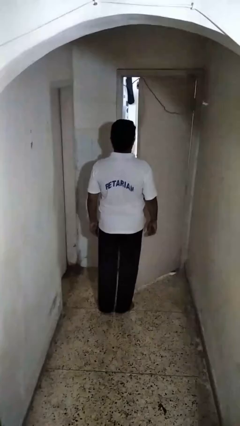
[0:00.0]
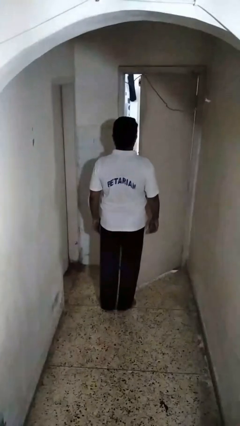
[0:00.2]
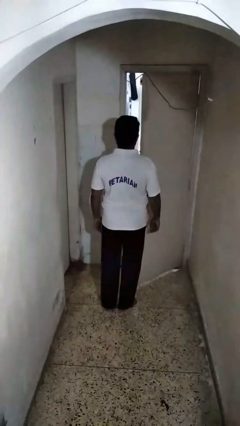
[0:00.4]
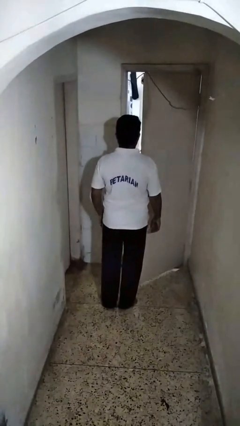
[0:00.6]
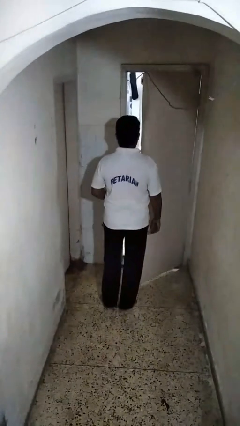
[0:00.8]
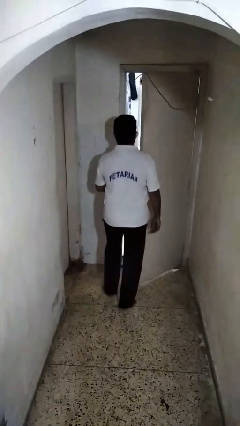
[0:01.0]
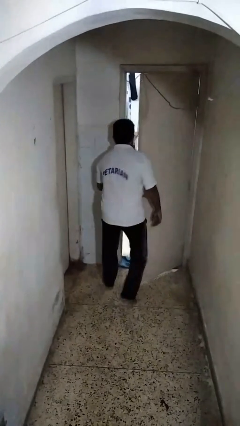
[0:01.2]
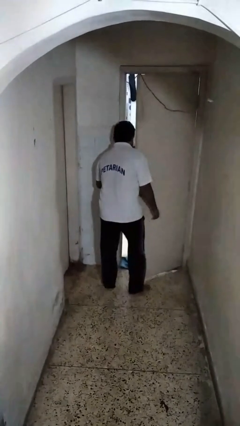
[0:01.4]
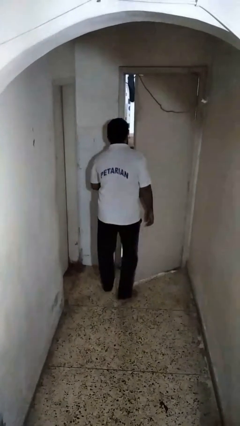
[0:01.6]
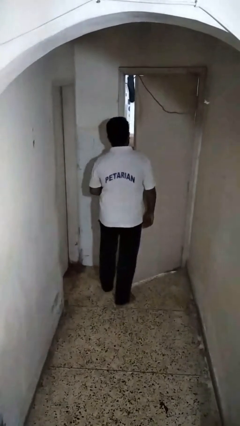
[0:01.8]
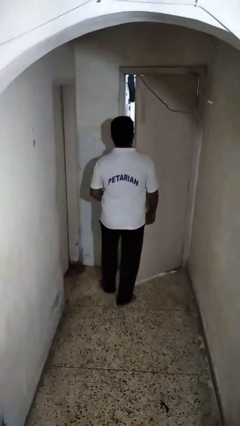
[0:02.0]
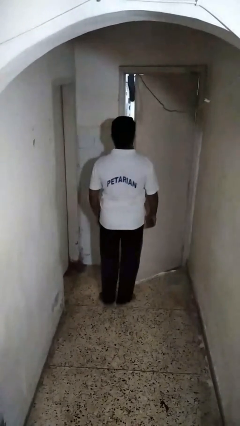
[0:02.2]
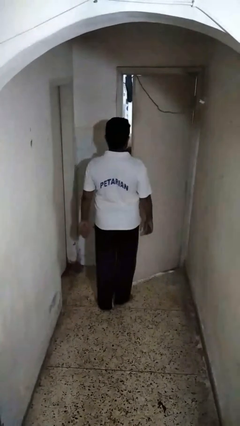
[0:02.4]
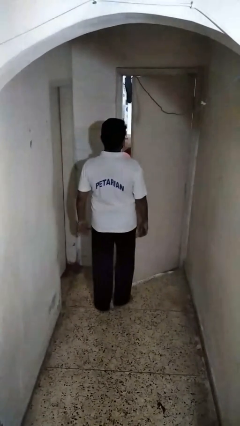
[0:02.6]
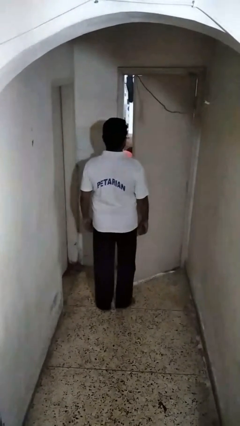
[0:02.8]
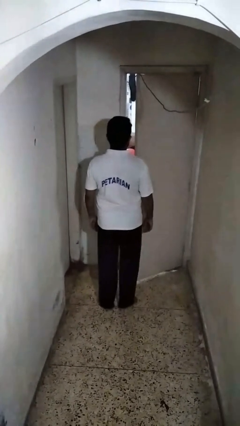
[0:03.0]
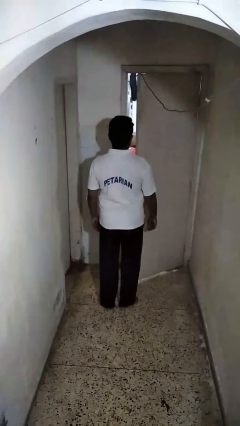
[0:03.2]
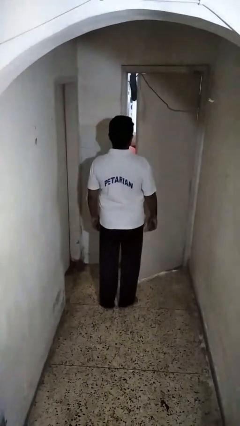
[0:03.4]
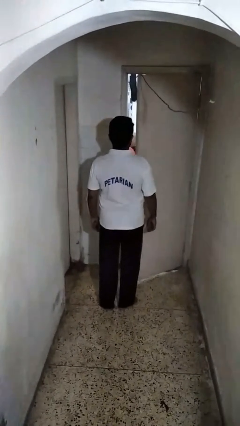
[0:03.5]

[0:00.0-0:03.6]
person bumps into wall

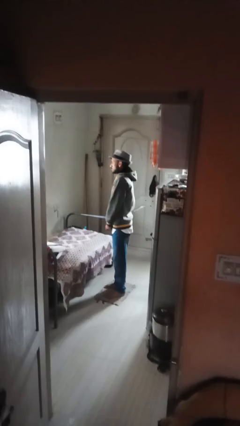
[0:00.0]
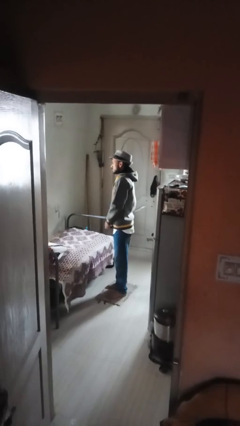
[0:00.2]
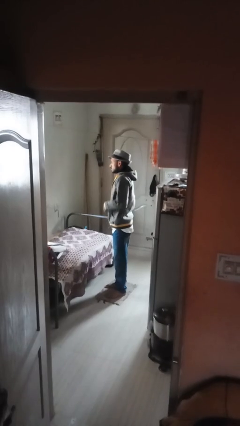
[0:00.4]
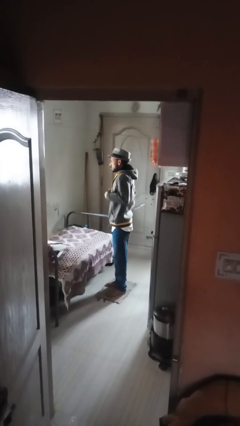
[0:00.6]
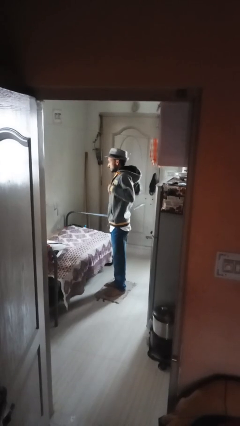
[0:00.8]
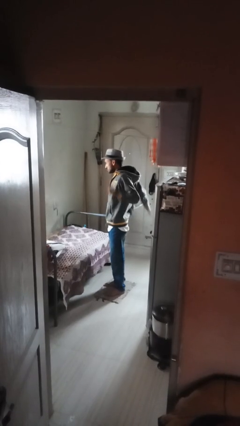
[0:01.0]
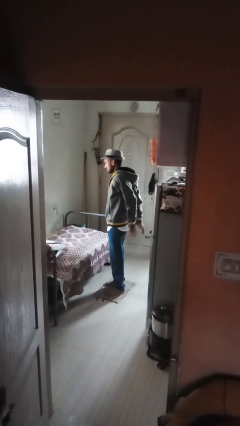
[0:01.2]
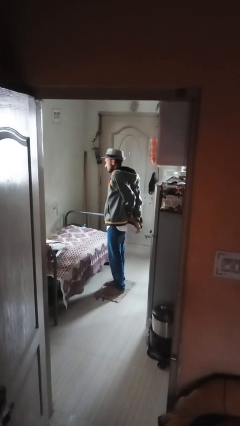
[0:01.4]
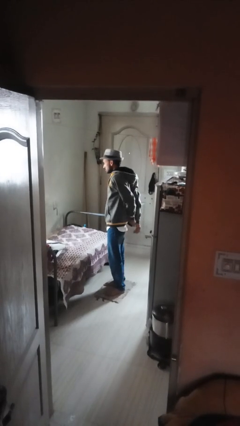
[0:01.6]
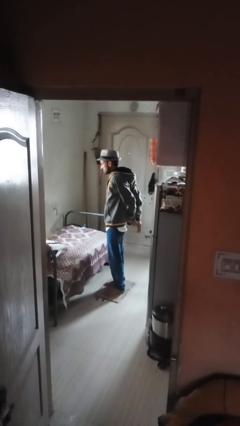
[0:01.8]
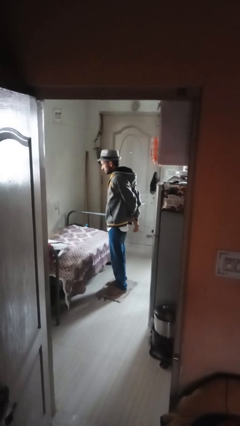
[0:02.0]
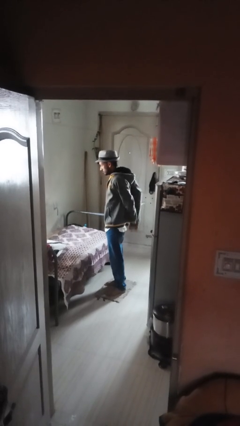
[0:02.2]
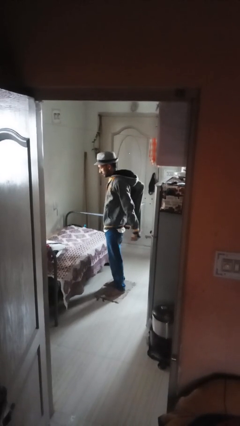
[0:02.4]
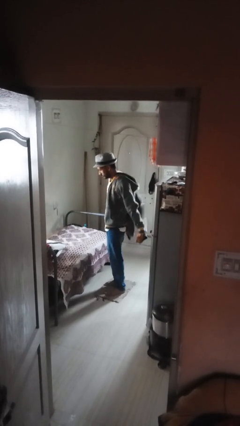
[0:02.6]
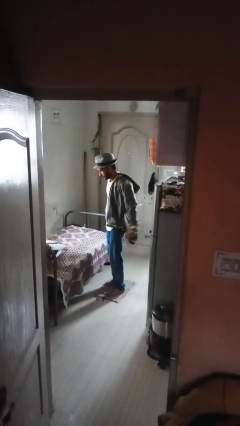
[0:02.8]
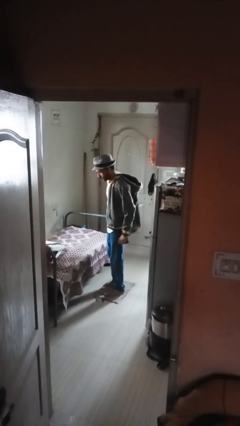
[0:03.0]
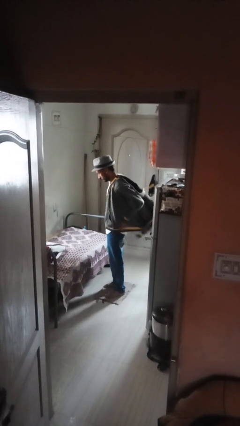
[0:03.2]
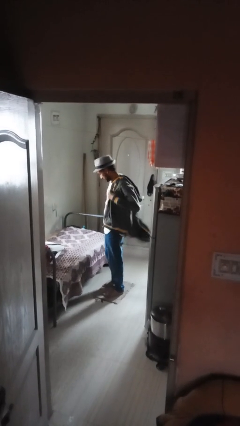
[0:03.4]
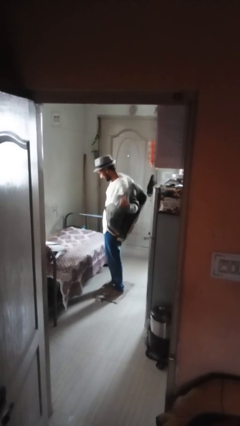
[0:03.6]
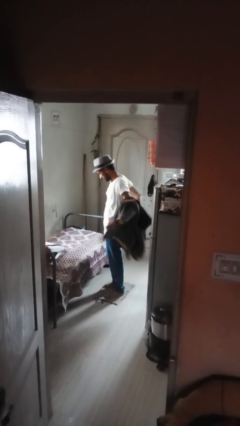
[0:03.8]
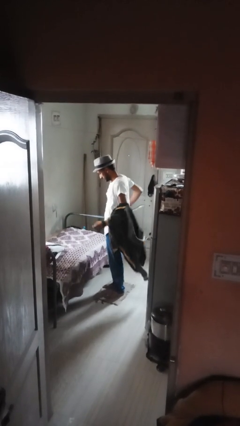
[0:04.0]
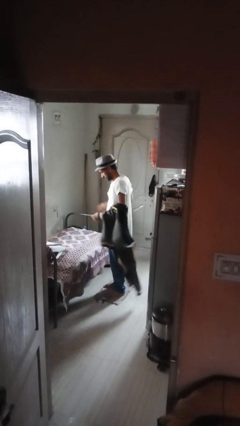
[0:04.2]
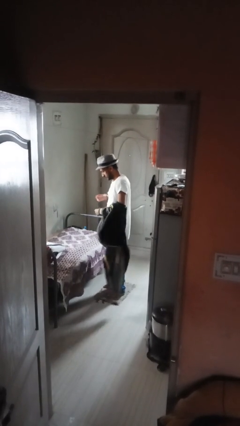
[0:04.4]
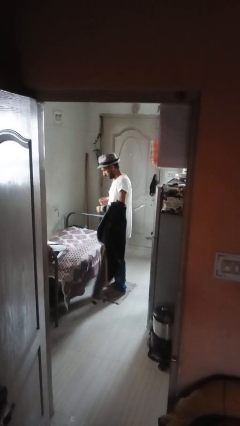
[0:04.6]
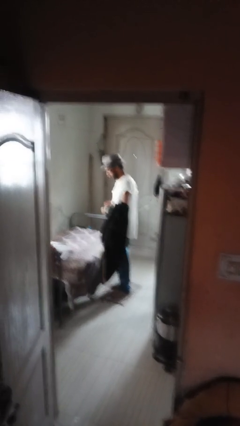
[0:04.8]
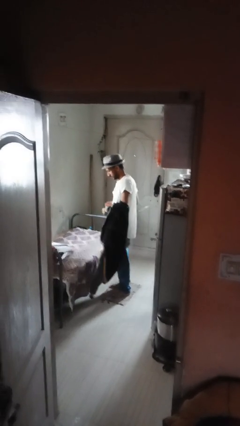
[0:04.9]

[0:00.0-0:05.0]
person takes off jacket

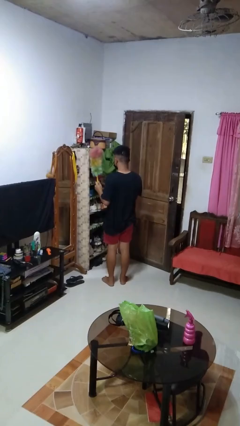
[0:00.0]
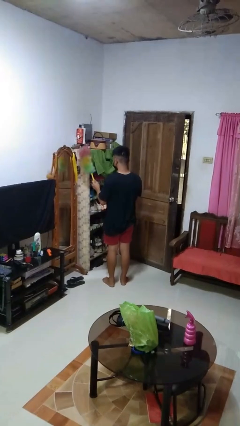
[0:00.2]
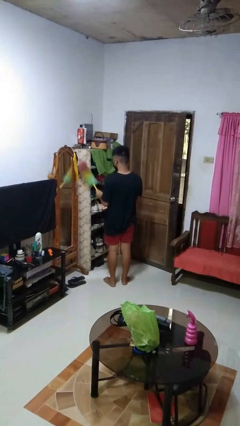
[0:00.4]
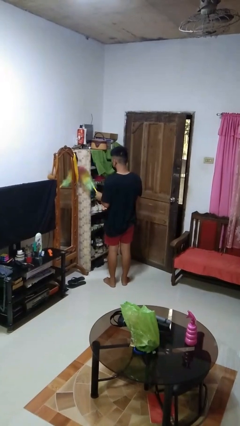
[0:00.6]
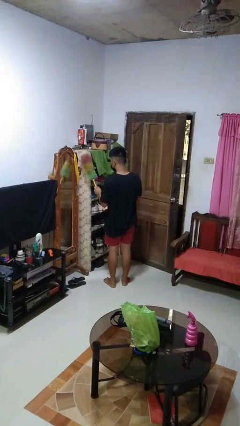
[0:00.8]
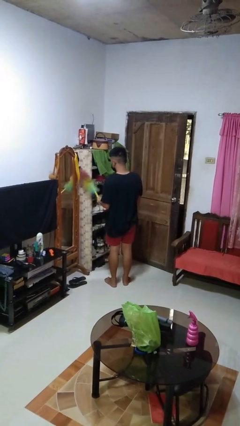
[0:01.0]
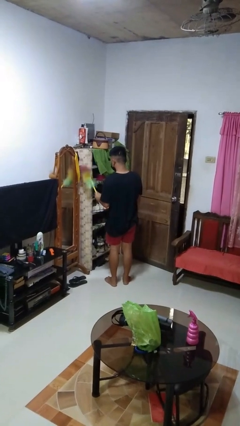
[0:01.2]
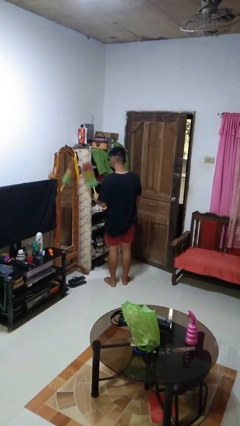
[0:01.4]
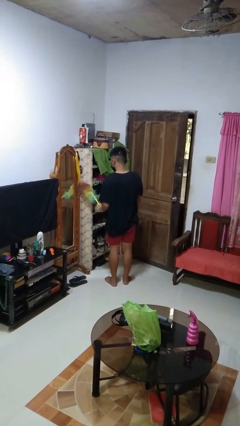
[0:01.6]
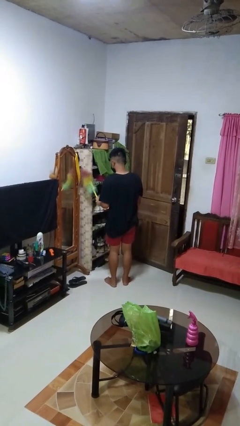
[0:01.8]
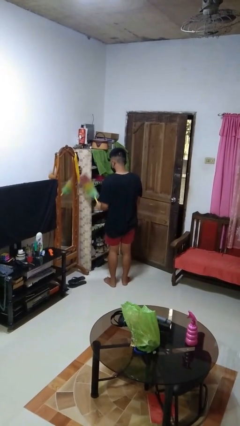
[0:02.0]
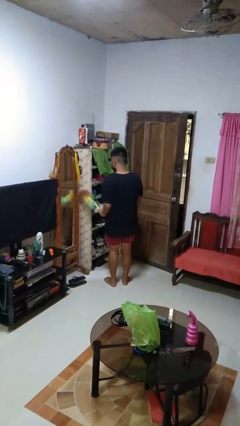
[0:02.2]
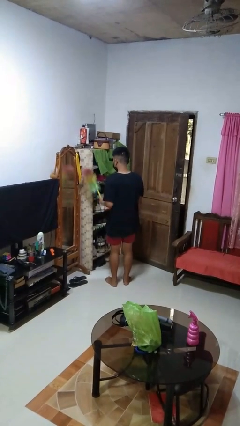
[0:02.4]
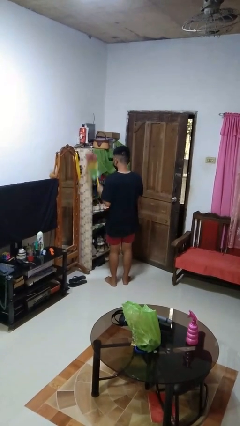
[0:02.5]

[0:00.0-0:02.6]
person dusts furniture

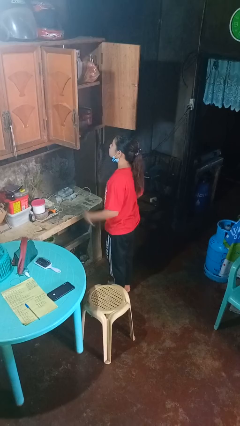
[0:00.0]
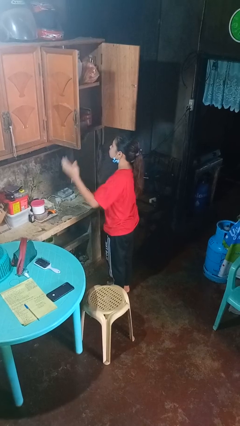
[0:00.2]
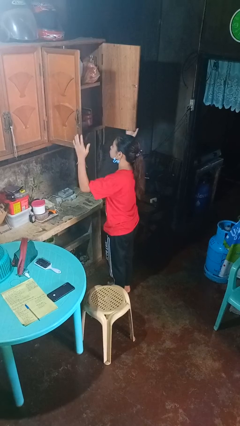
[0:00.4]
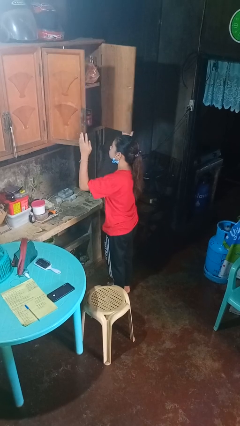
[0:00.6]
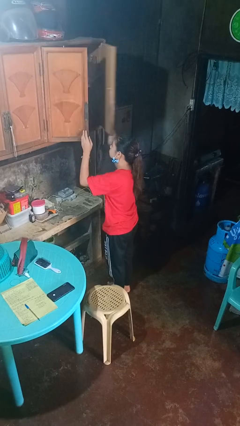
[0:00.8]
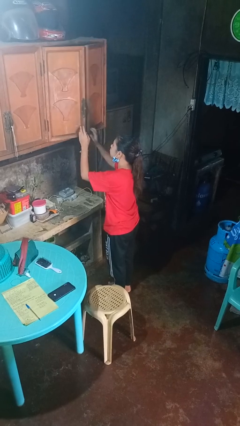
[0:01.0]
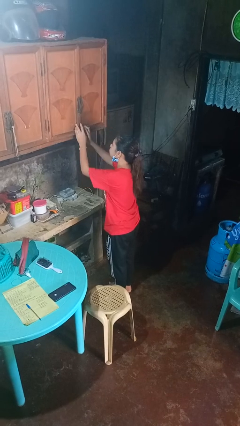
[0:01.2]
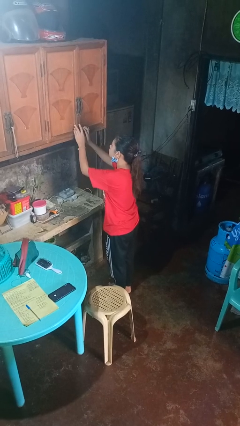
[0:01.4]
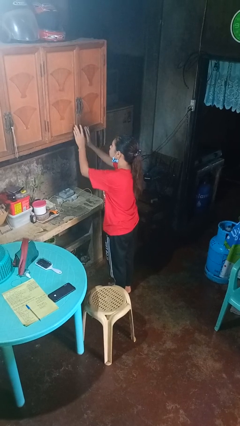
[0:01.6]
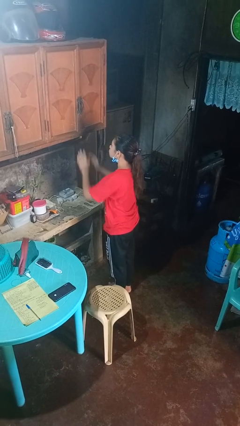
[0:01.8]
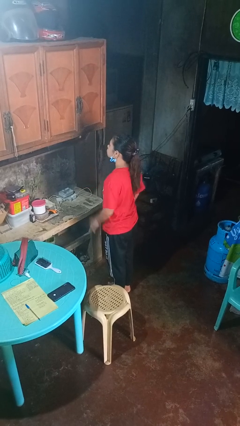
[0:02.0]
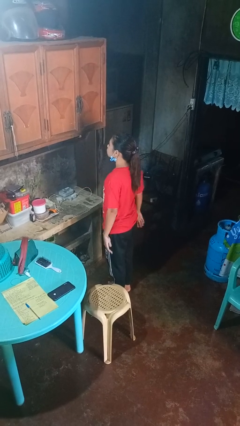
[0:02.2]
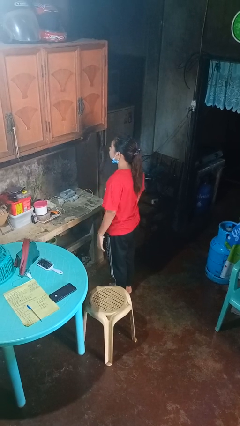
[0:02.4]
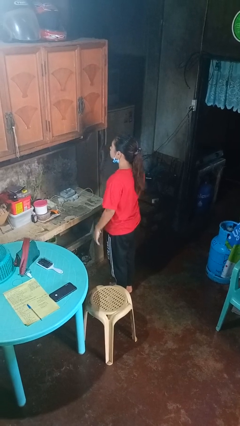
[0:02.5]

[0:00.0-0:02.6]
person closes cabinet

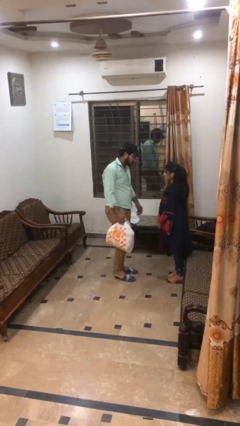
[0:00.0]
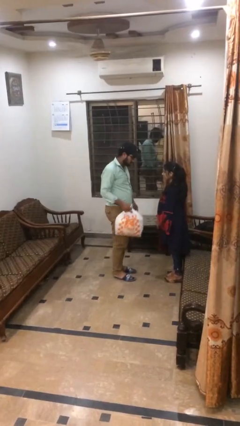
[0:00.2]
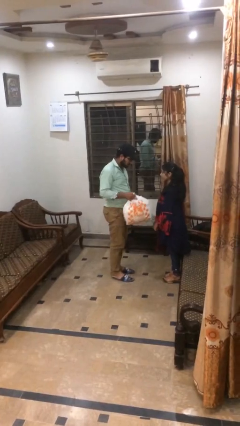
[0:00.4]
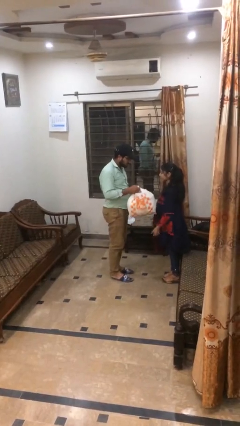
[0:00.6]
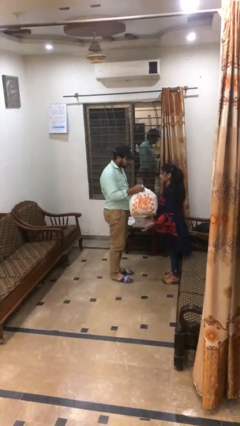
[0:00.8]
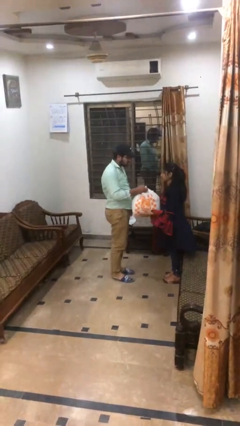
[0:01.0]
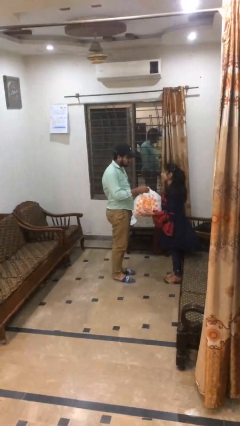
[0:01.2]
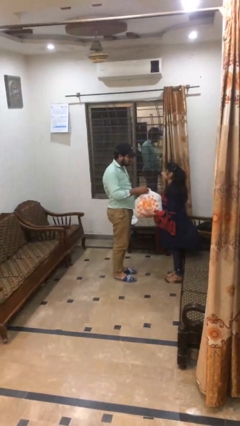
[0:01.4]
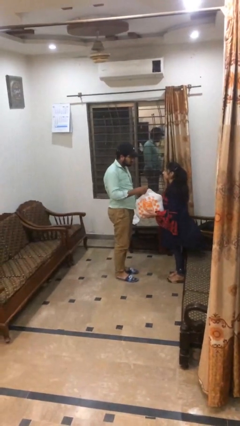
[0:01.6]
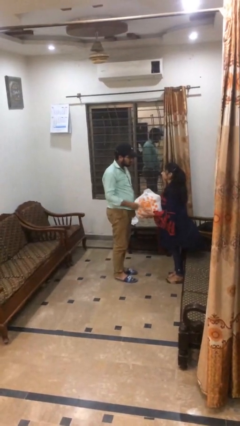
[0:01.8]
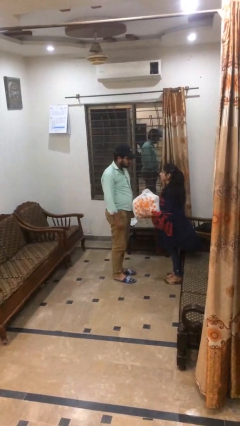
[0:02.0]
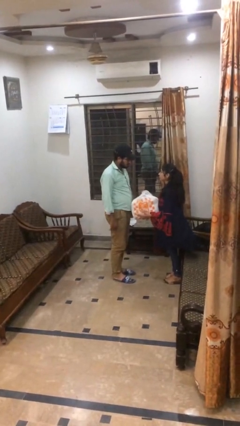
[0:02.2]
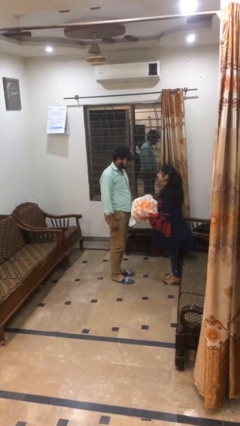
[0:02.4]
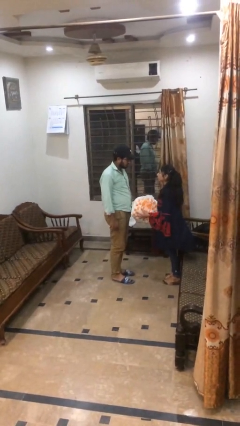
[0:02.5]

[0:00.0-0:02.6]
person transfers object to person

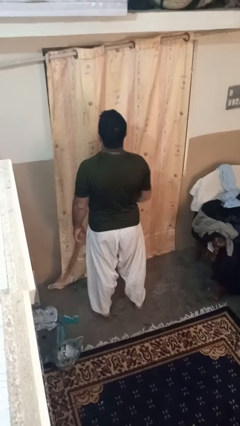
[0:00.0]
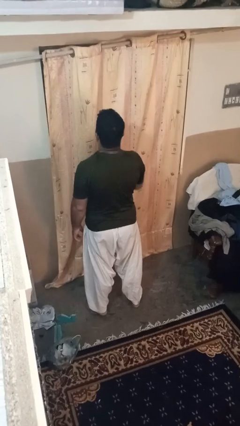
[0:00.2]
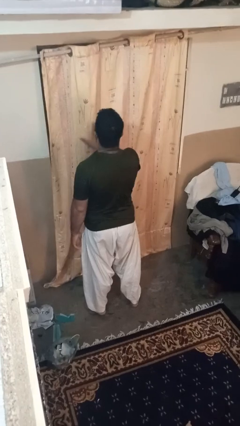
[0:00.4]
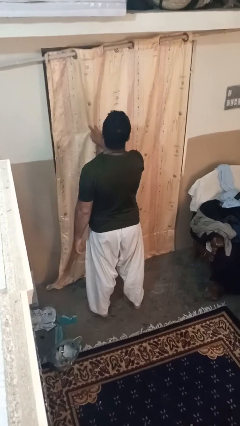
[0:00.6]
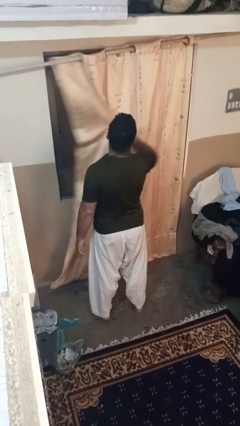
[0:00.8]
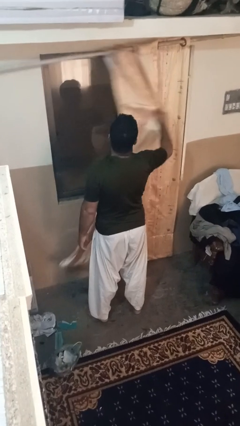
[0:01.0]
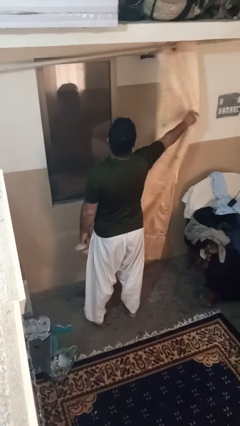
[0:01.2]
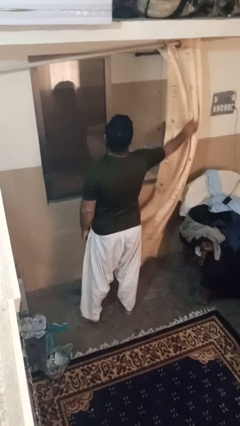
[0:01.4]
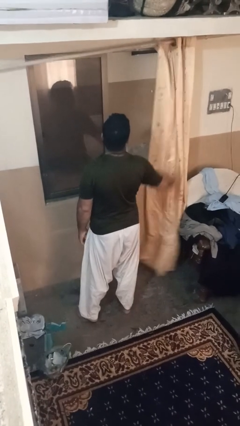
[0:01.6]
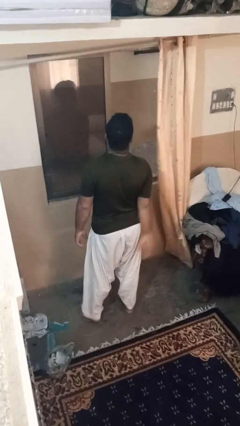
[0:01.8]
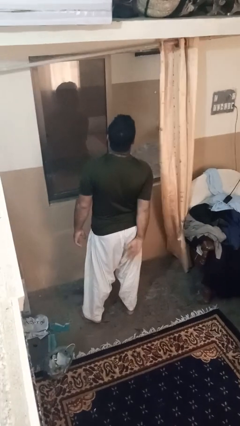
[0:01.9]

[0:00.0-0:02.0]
person opens curtains
